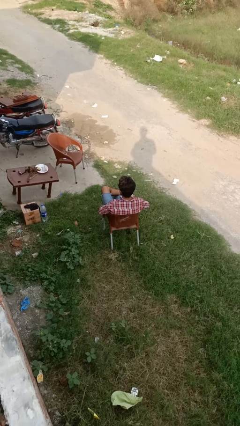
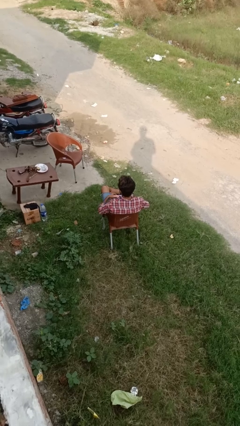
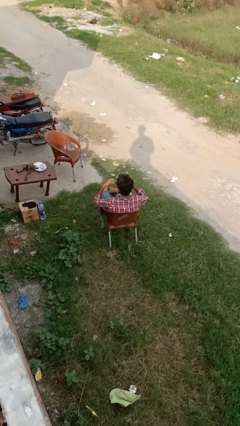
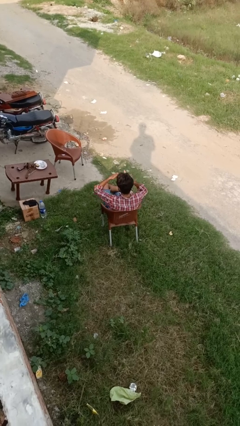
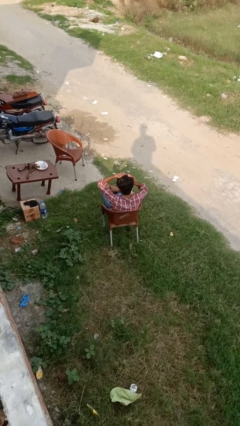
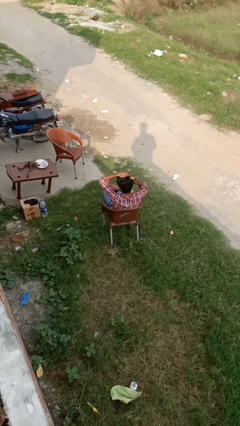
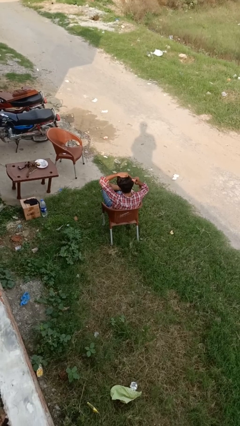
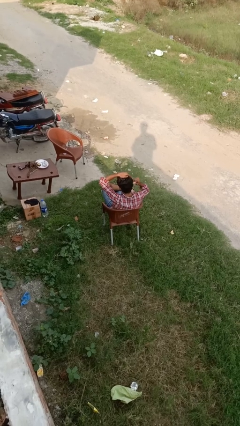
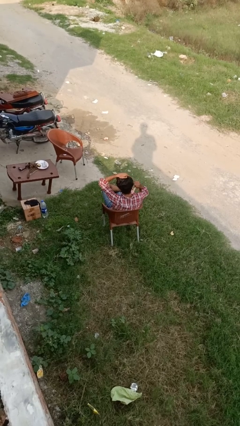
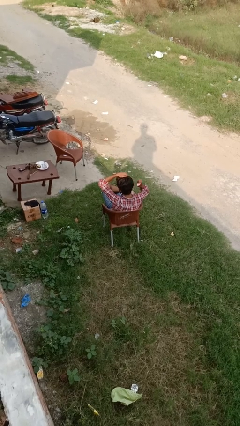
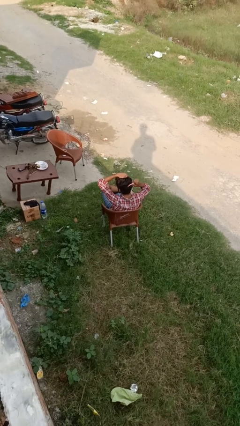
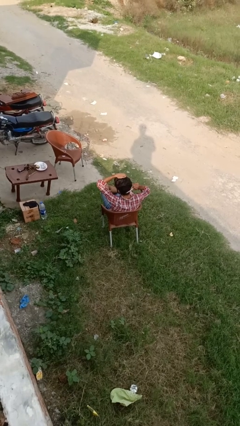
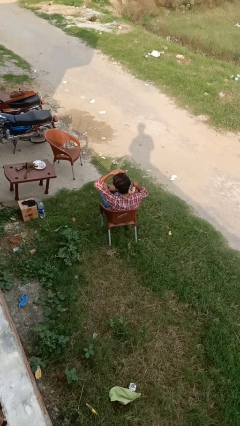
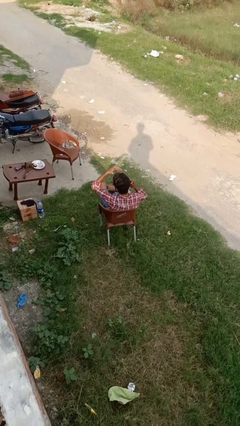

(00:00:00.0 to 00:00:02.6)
person brushes hair

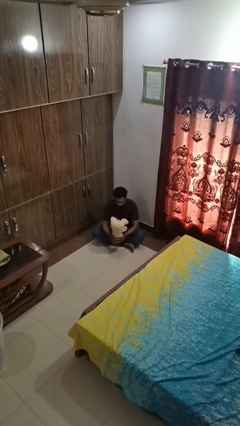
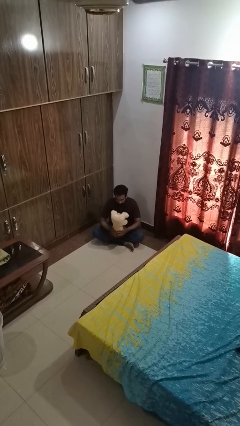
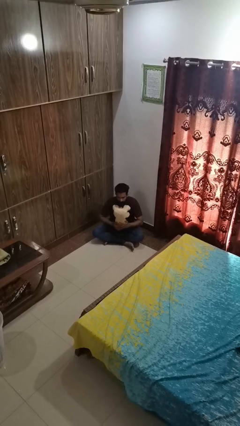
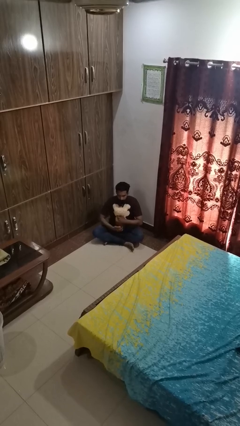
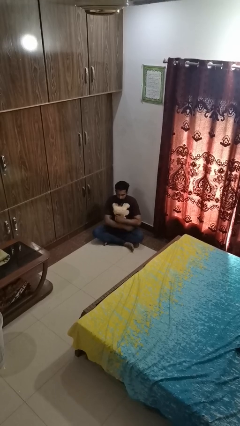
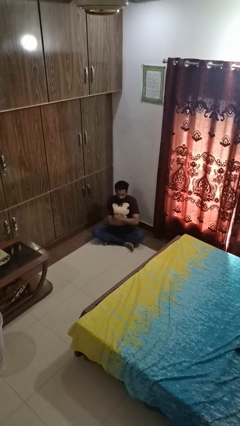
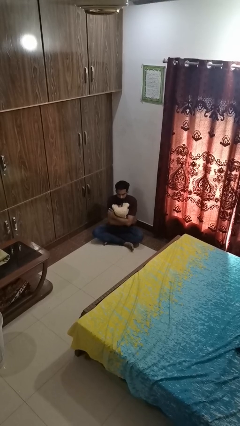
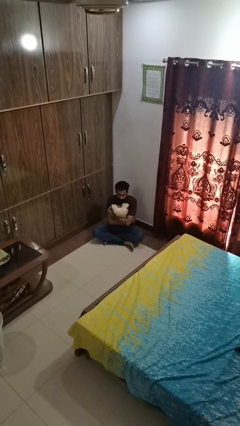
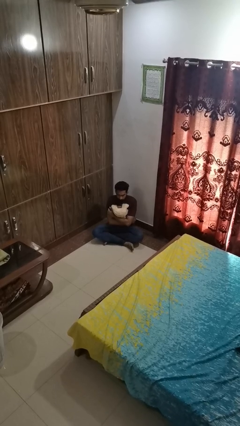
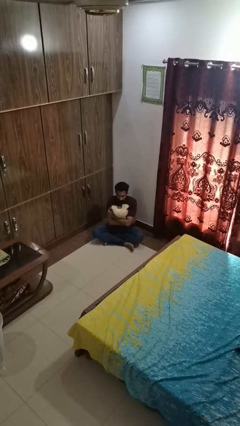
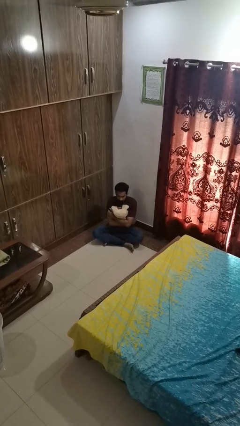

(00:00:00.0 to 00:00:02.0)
person hugs stuffed animal

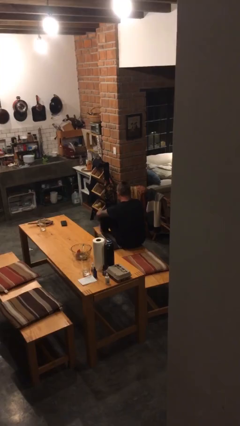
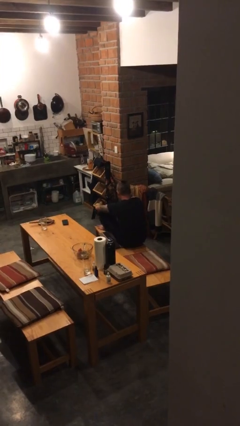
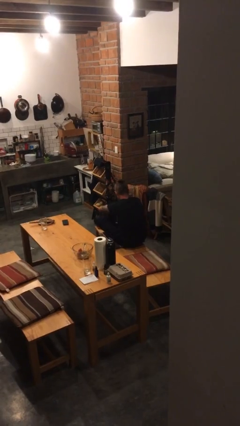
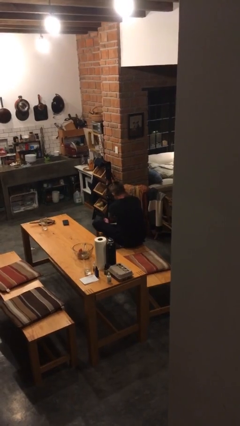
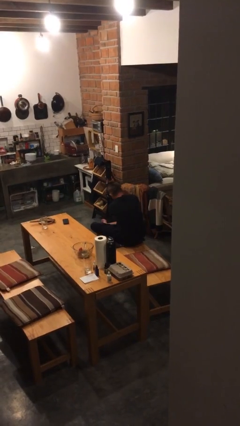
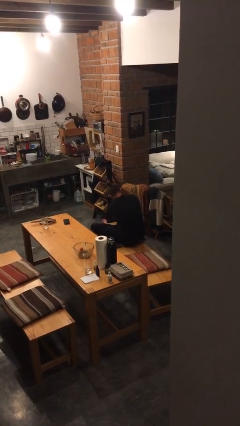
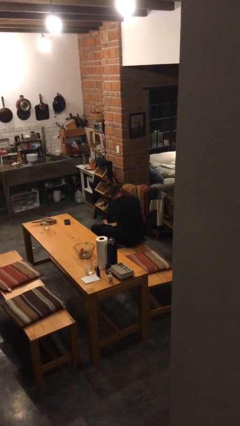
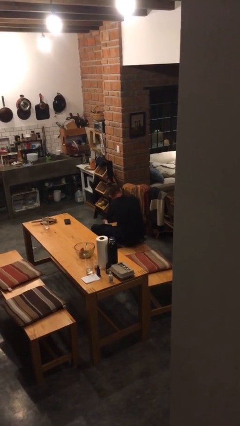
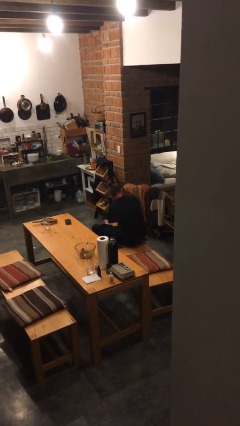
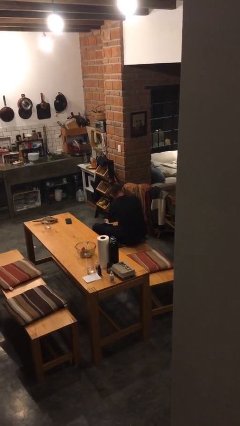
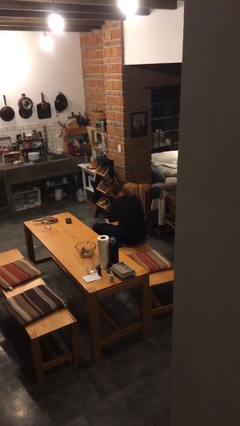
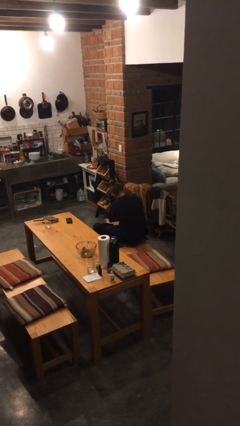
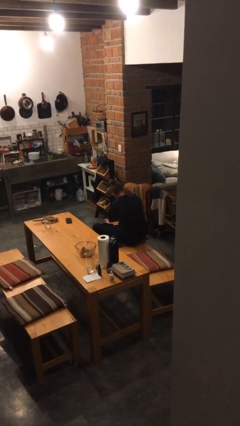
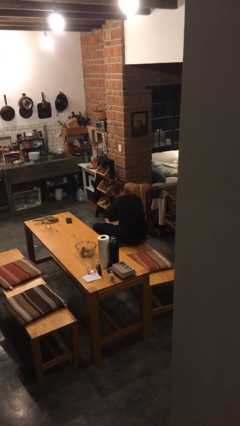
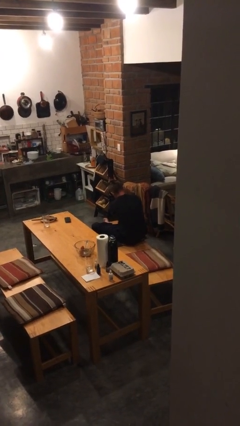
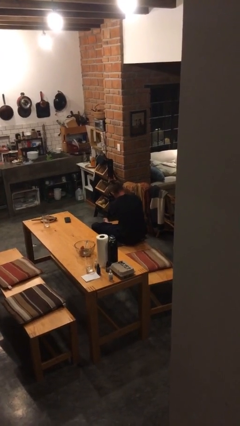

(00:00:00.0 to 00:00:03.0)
person rubs foot

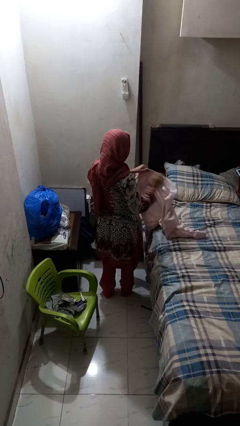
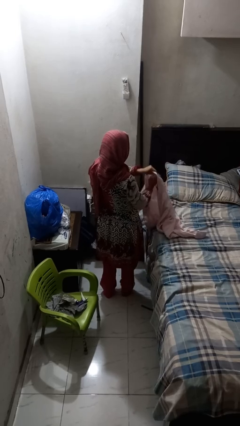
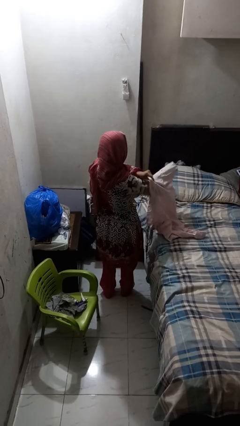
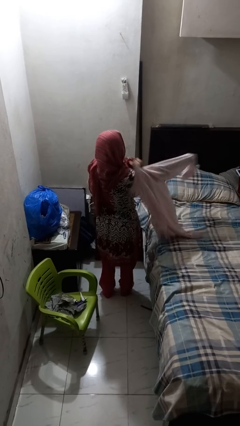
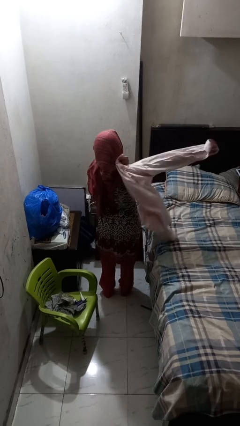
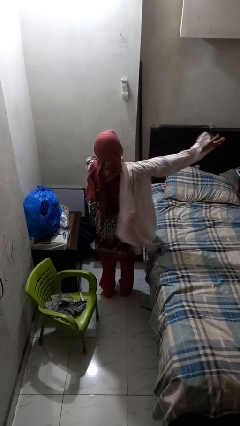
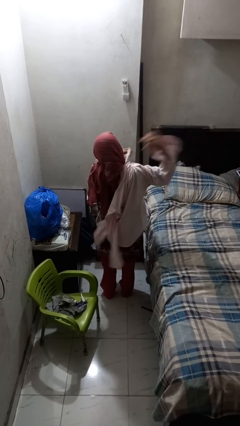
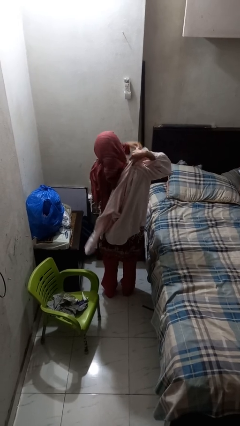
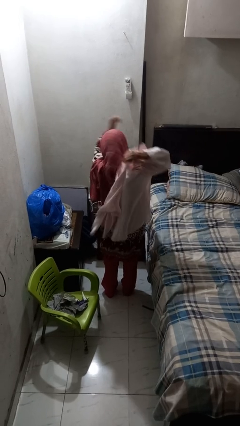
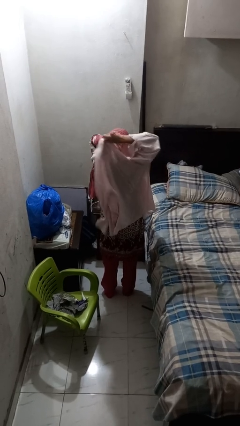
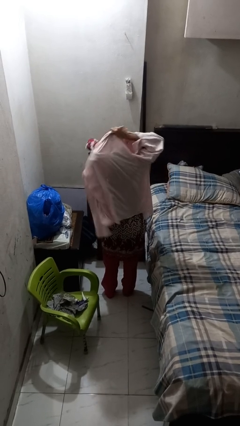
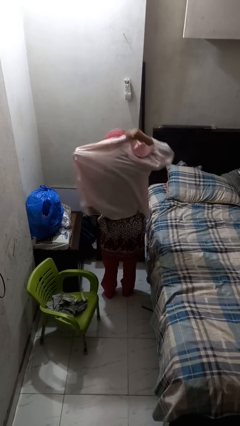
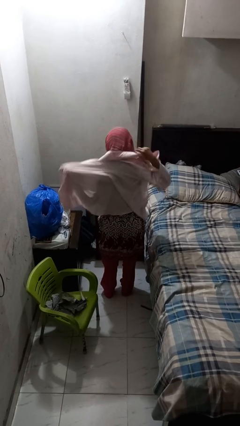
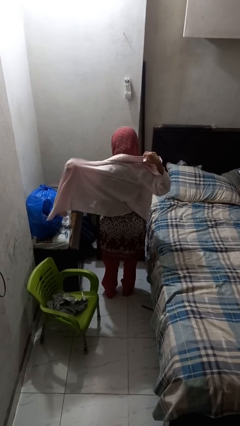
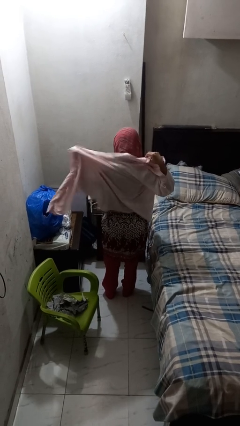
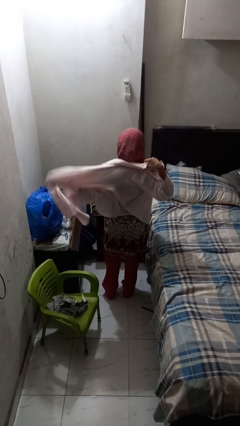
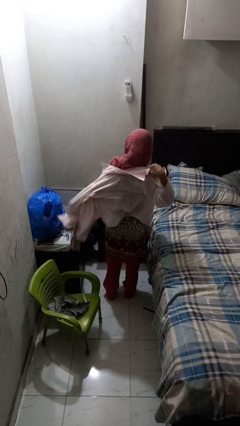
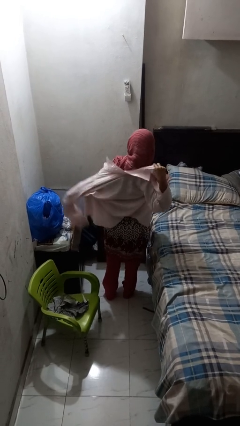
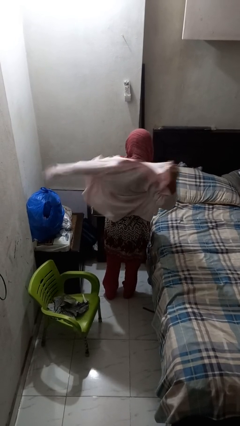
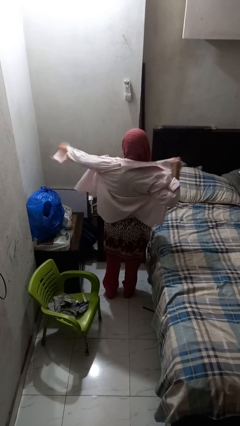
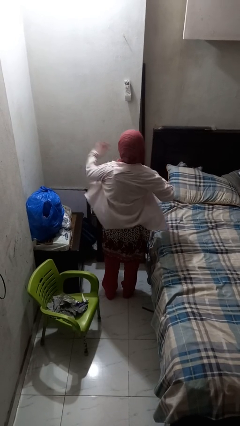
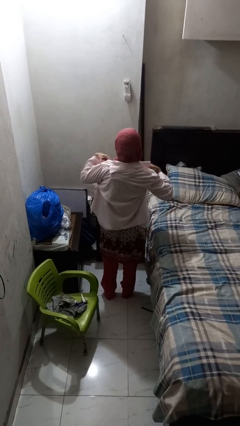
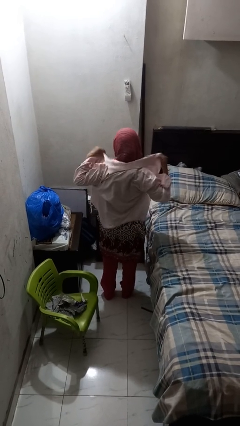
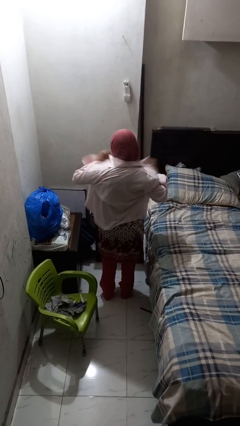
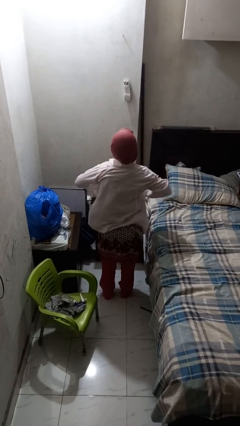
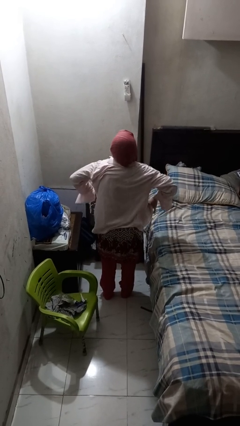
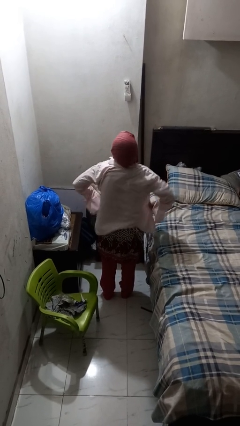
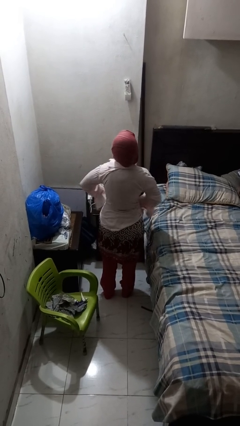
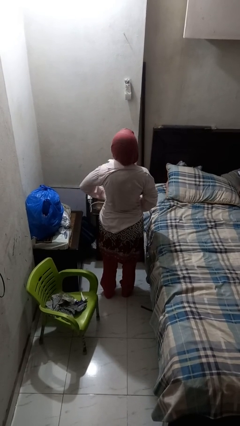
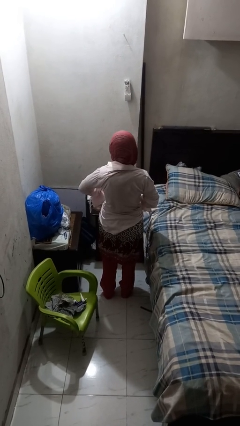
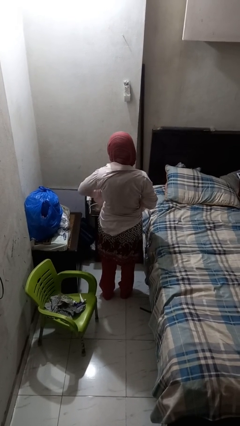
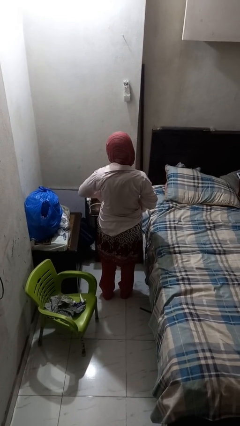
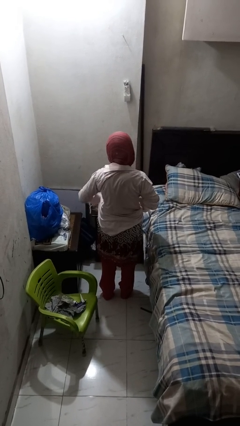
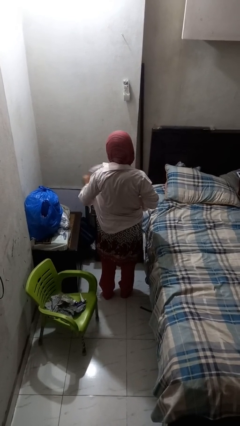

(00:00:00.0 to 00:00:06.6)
person puts on shirt

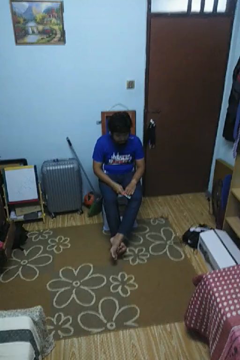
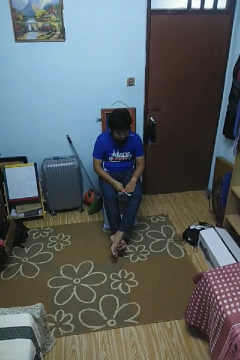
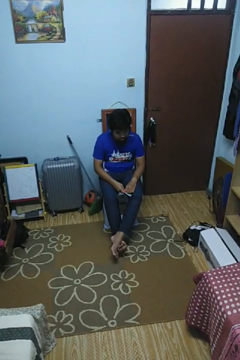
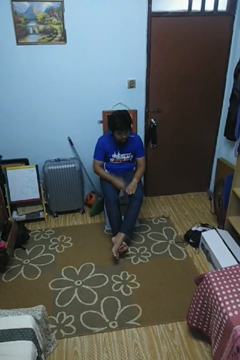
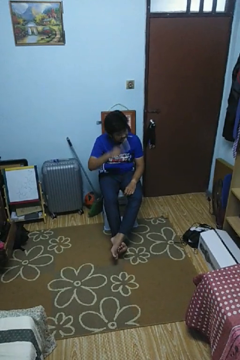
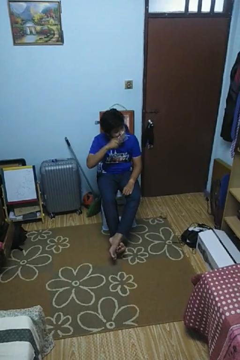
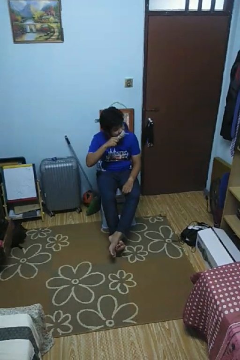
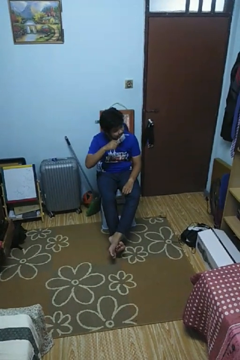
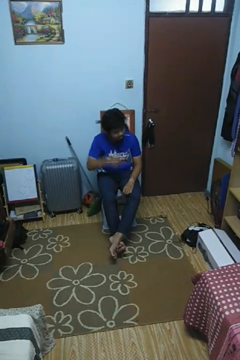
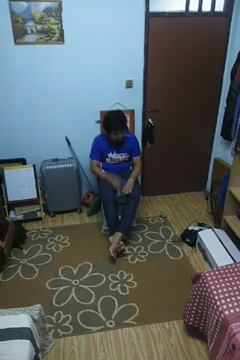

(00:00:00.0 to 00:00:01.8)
person brushes teeth

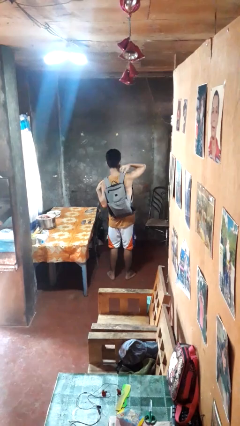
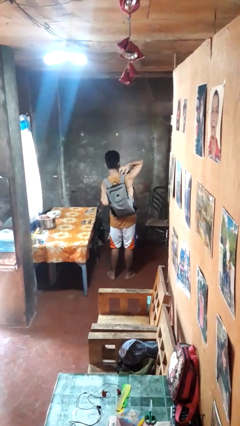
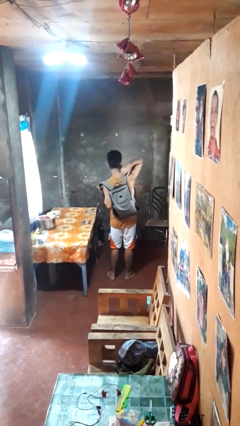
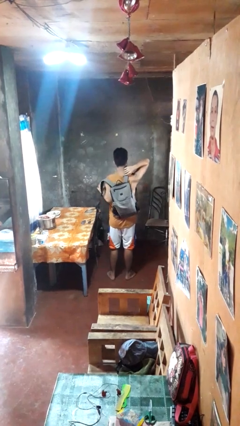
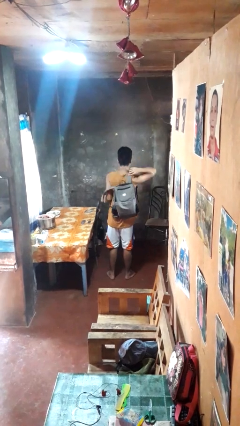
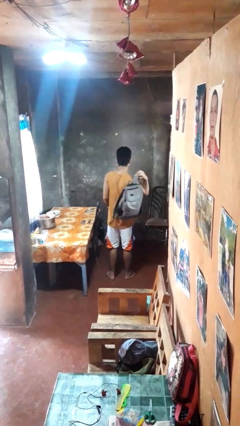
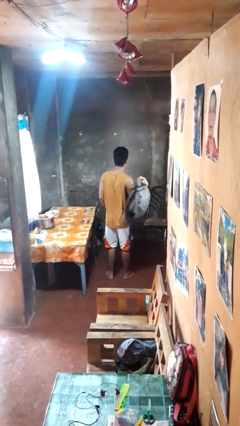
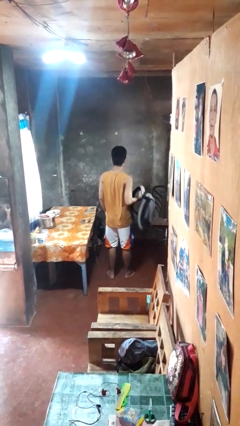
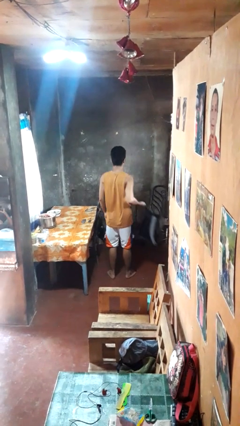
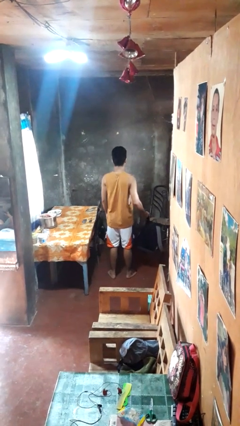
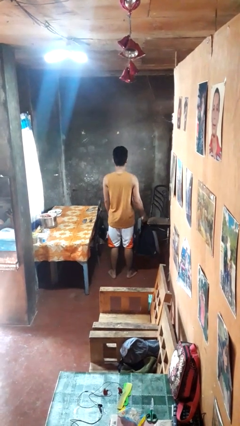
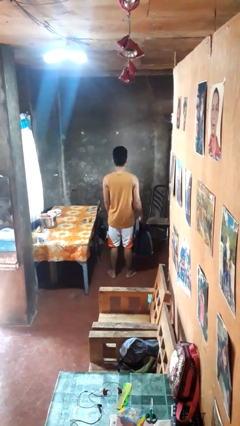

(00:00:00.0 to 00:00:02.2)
person takes off backpack
